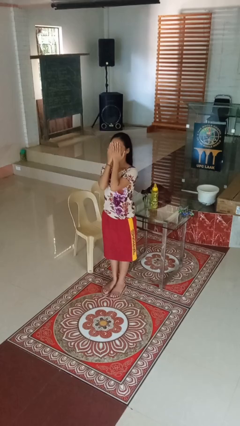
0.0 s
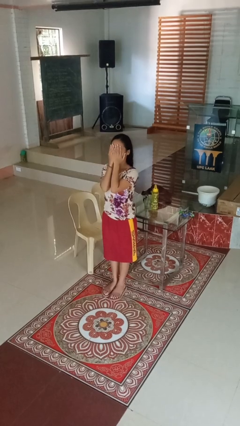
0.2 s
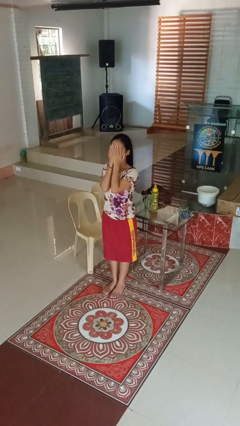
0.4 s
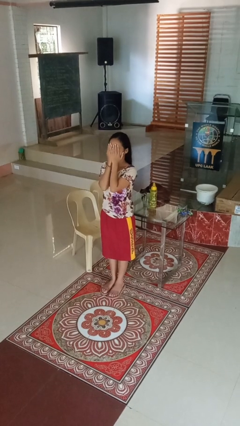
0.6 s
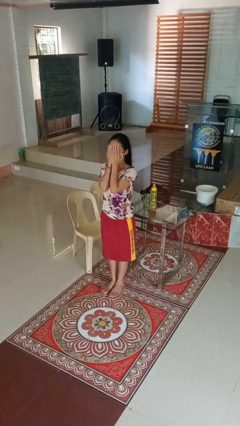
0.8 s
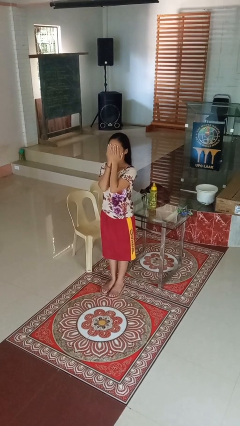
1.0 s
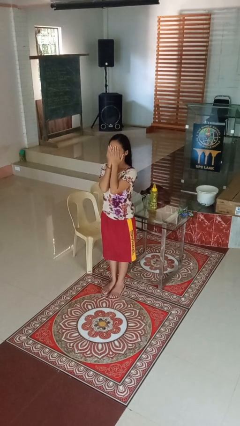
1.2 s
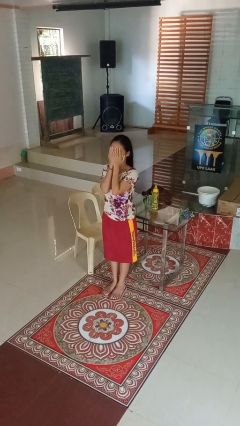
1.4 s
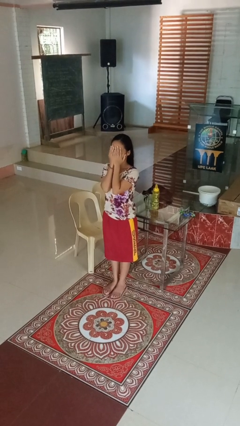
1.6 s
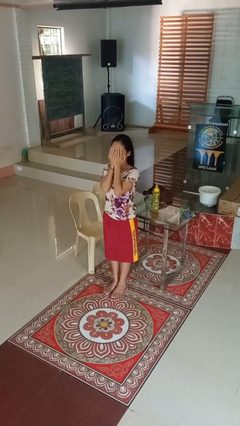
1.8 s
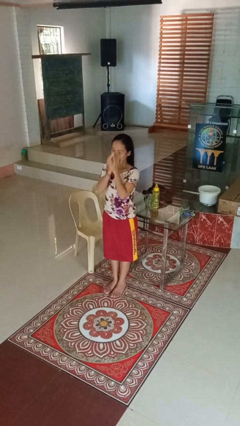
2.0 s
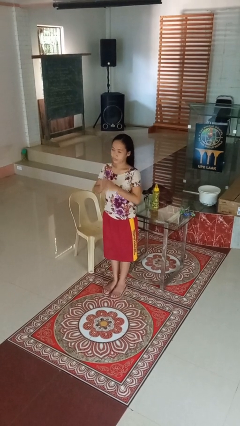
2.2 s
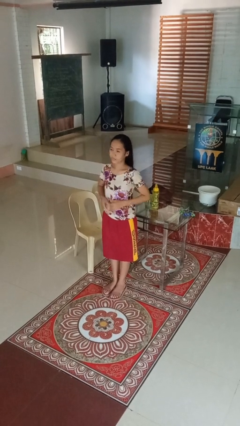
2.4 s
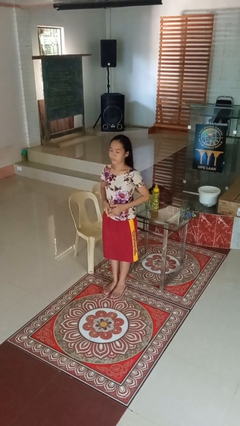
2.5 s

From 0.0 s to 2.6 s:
person covers face with hands

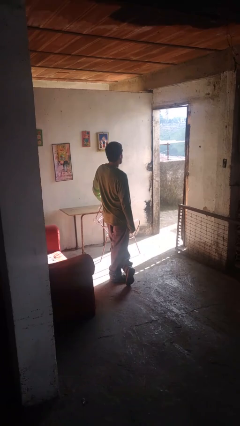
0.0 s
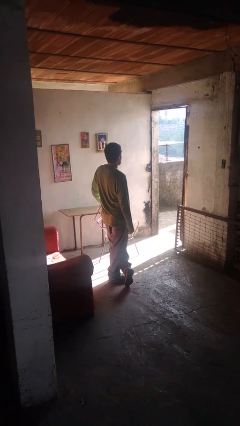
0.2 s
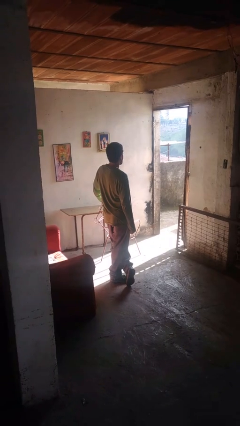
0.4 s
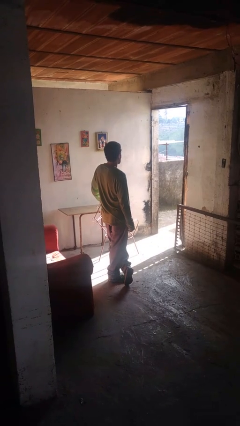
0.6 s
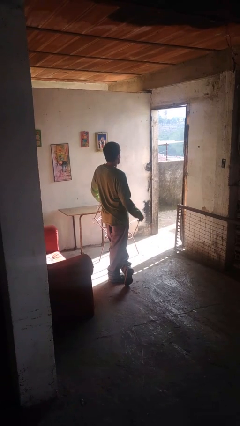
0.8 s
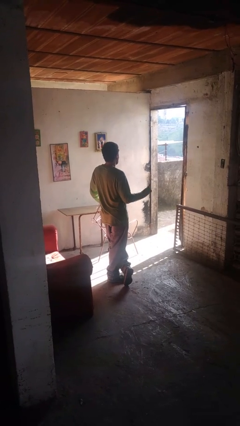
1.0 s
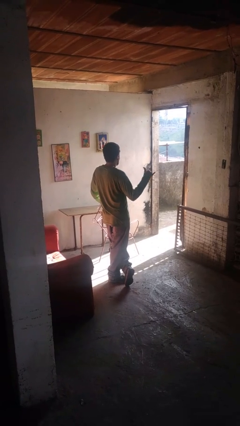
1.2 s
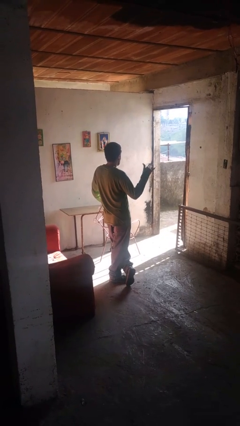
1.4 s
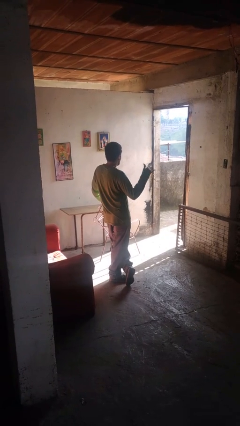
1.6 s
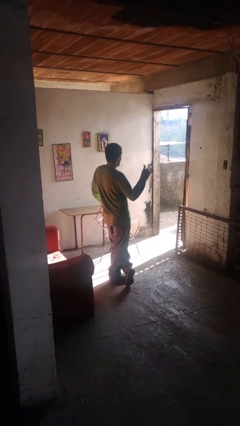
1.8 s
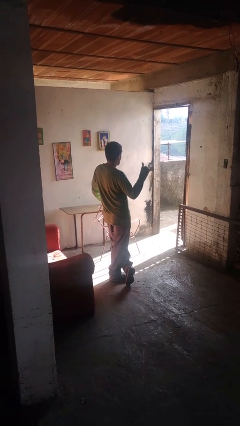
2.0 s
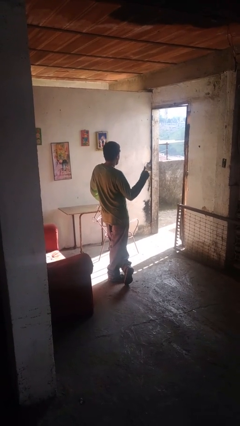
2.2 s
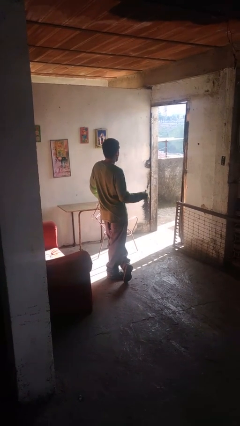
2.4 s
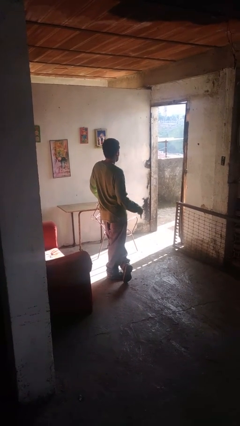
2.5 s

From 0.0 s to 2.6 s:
person gestures hang loose

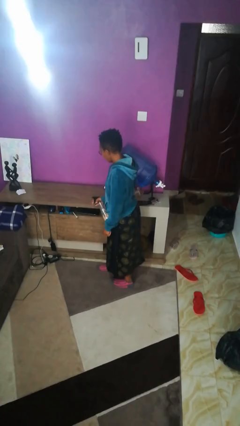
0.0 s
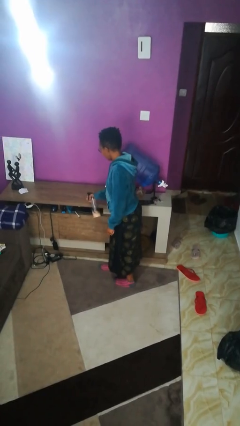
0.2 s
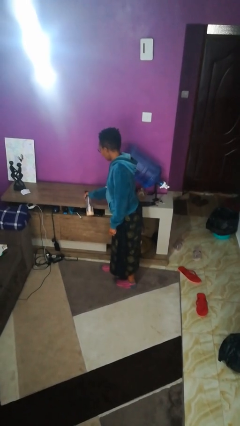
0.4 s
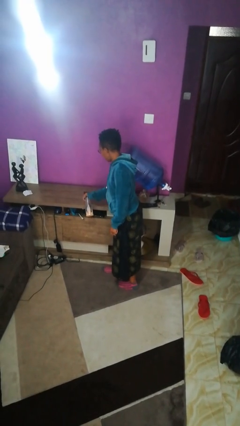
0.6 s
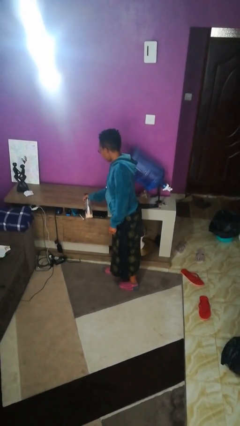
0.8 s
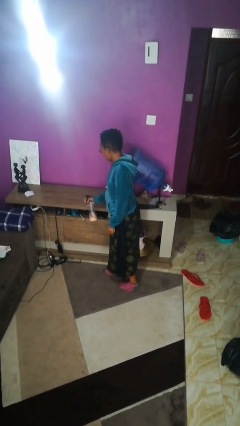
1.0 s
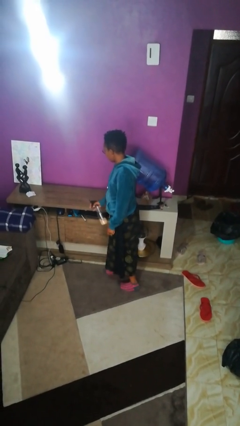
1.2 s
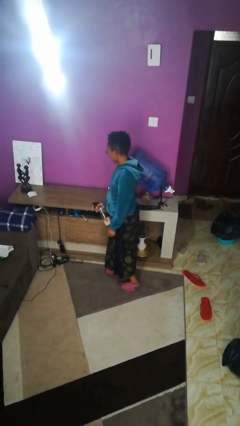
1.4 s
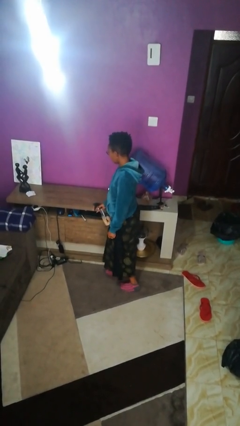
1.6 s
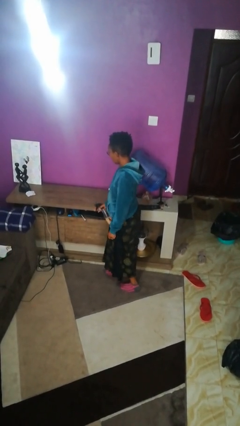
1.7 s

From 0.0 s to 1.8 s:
person sprays from bottle

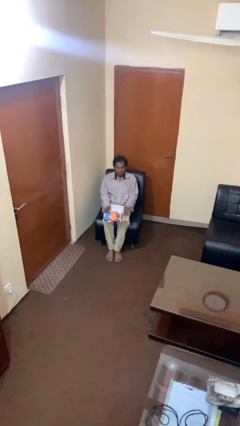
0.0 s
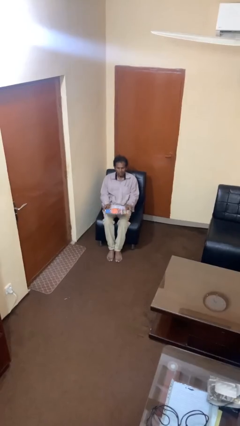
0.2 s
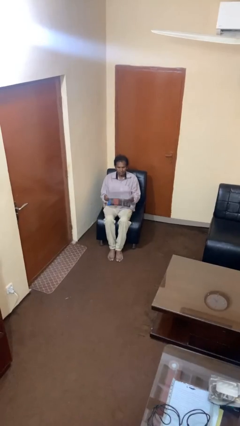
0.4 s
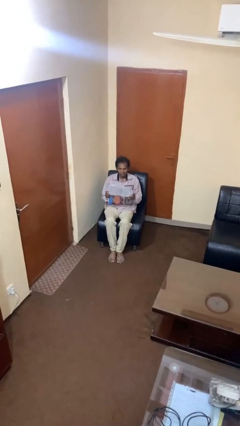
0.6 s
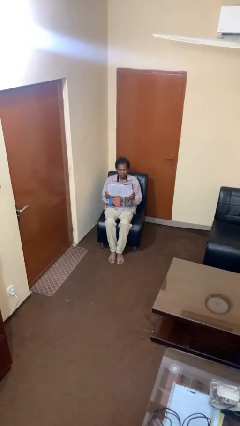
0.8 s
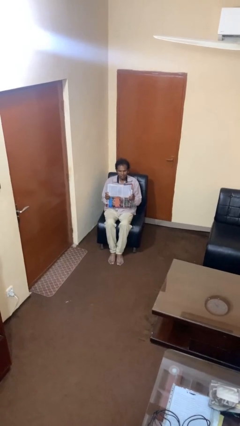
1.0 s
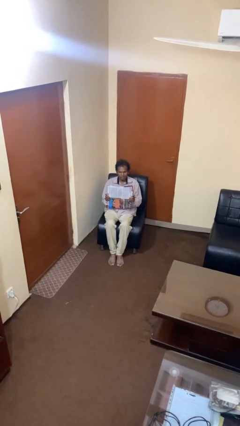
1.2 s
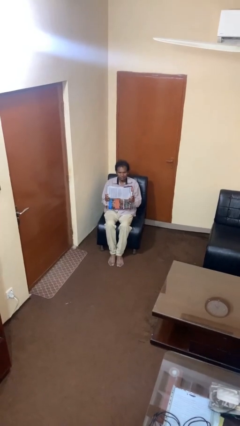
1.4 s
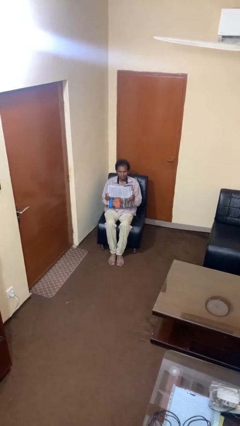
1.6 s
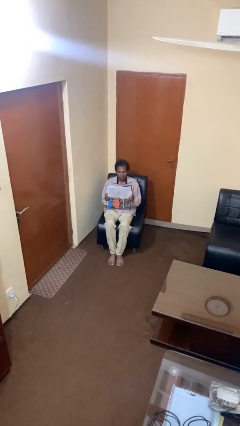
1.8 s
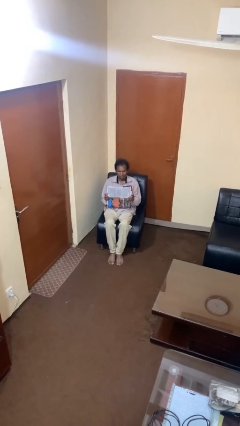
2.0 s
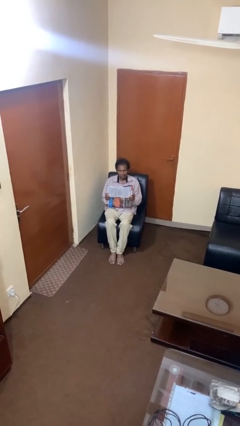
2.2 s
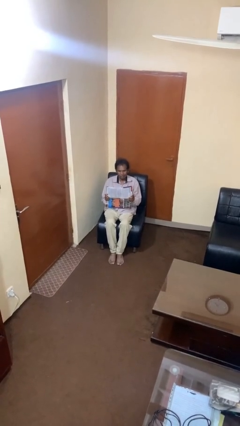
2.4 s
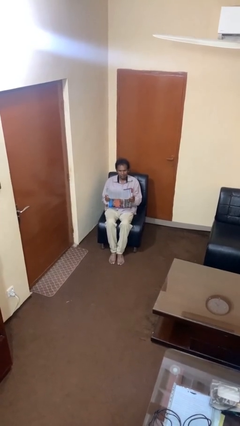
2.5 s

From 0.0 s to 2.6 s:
person reads newspaper

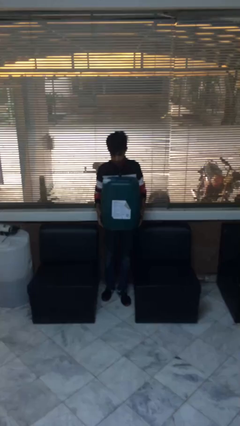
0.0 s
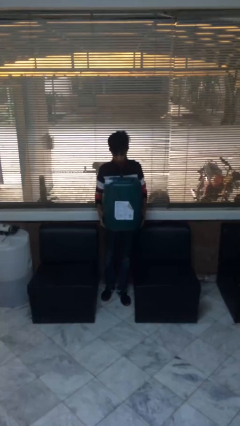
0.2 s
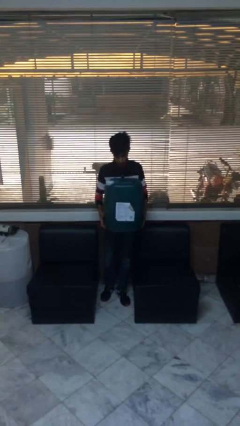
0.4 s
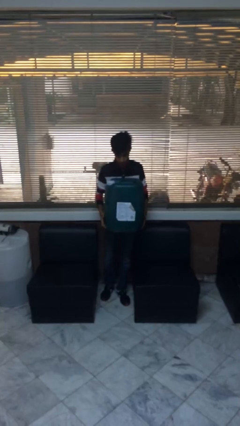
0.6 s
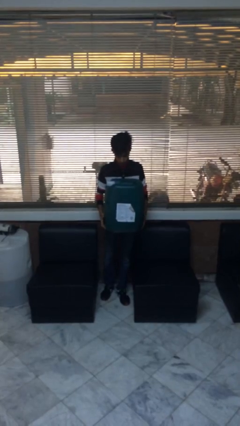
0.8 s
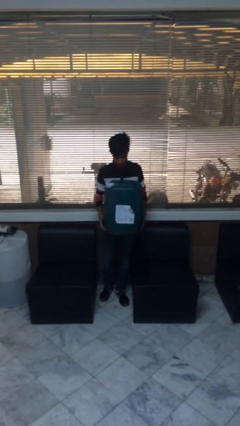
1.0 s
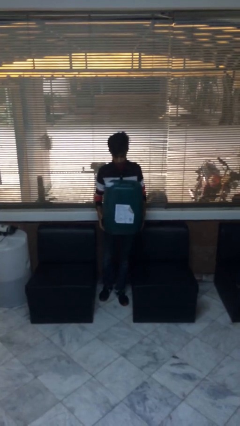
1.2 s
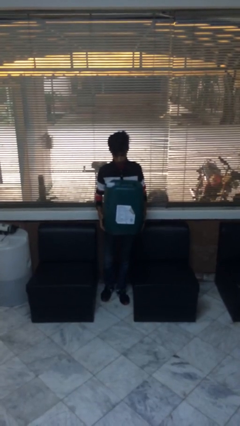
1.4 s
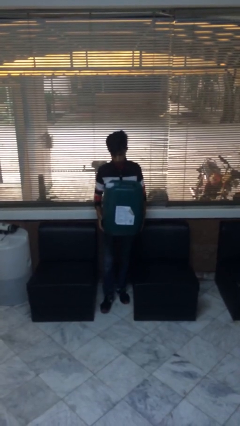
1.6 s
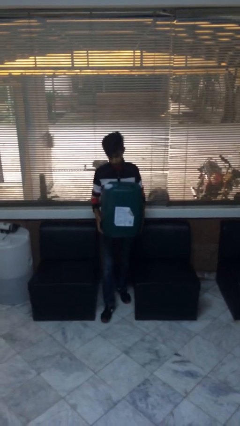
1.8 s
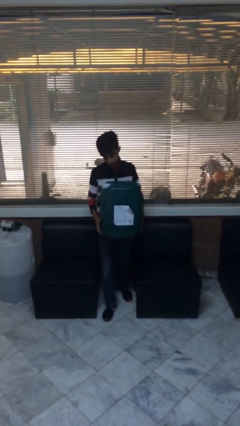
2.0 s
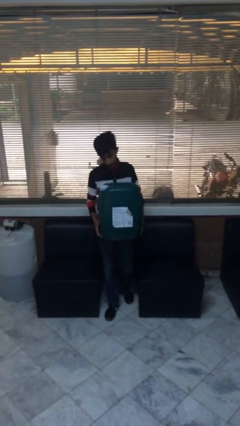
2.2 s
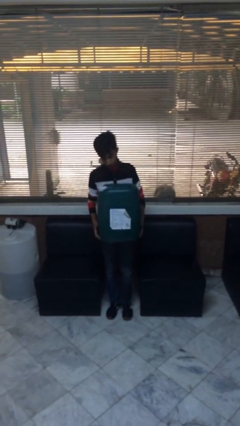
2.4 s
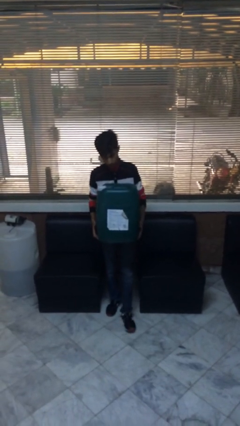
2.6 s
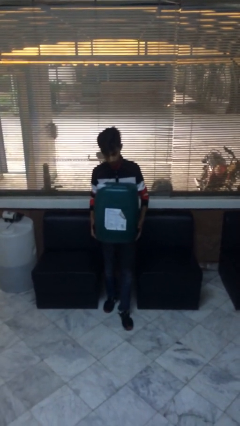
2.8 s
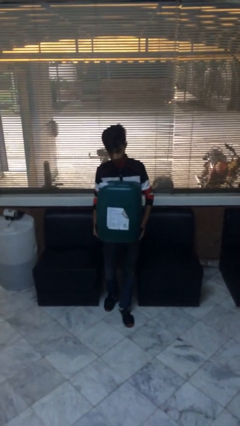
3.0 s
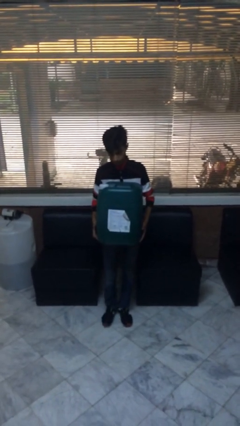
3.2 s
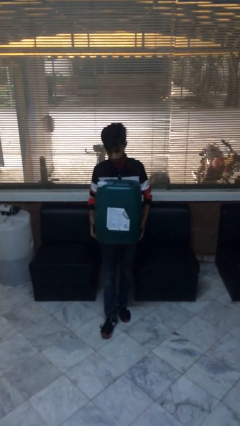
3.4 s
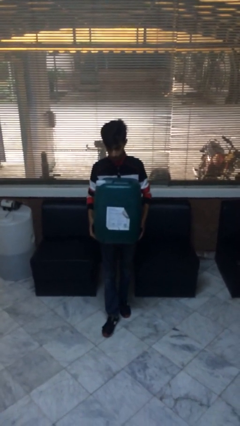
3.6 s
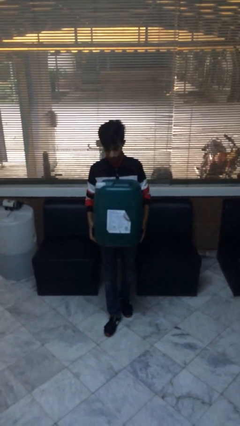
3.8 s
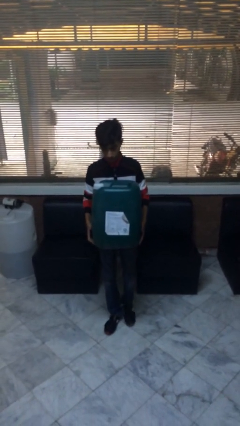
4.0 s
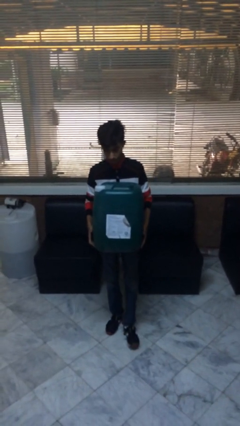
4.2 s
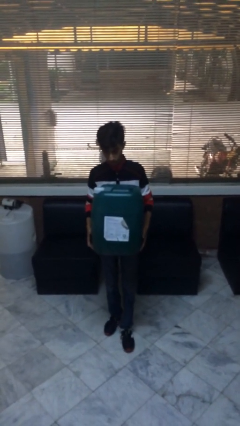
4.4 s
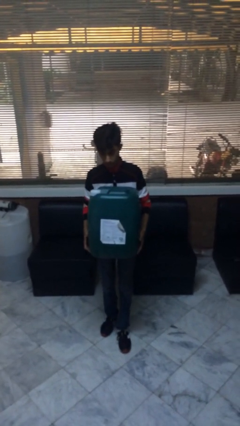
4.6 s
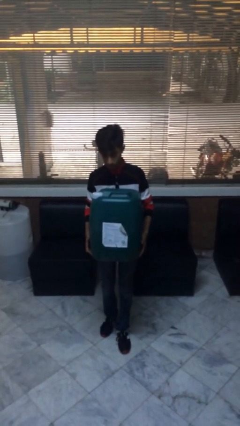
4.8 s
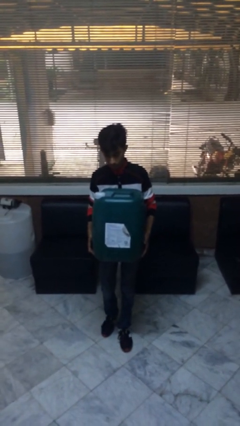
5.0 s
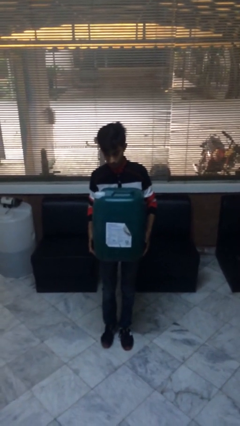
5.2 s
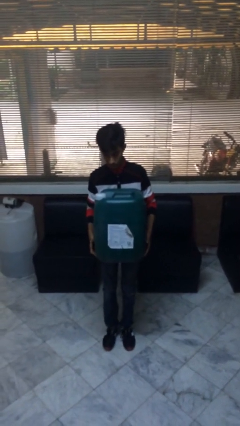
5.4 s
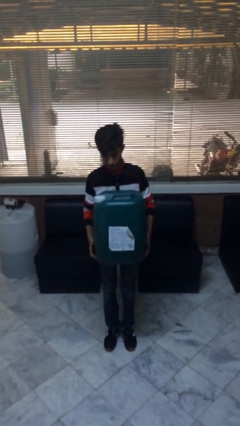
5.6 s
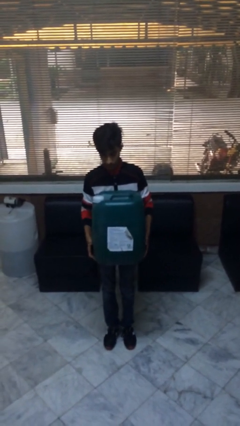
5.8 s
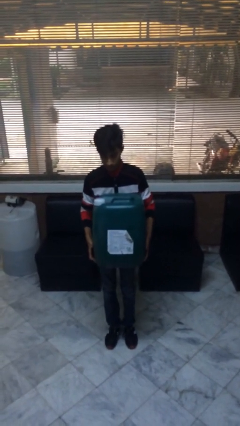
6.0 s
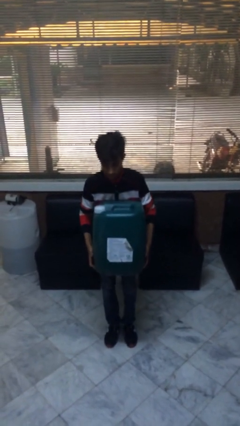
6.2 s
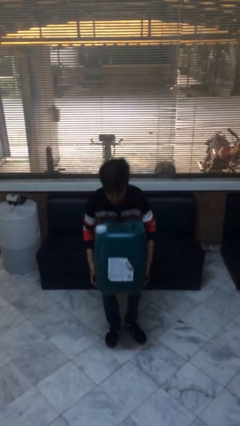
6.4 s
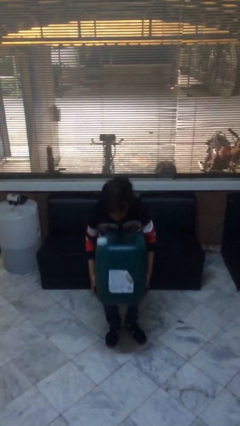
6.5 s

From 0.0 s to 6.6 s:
person carries heavy object

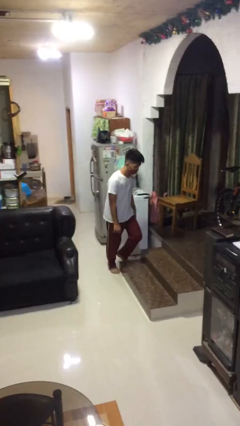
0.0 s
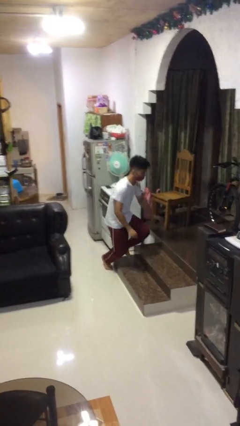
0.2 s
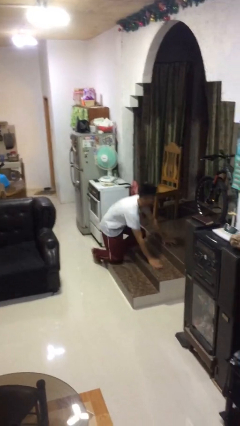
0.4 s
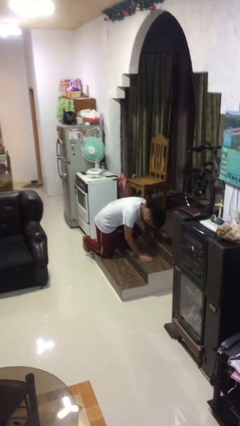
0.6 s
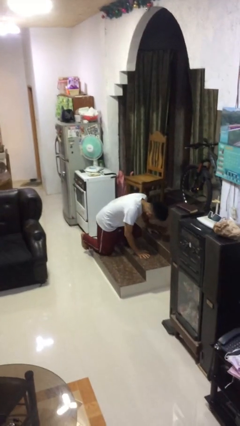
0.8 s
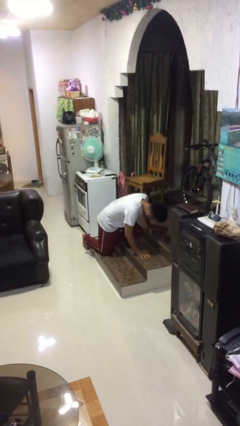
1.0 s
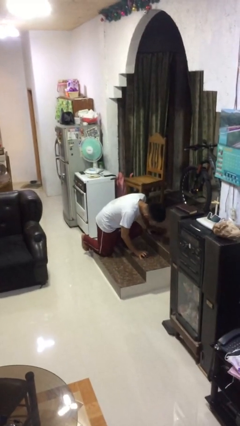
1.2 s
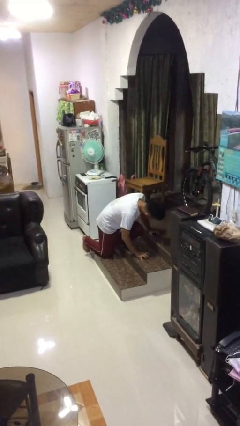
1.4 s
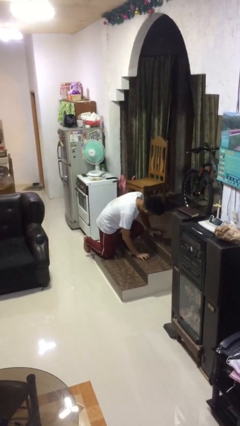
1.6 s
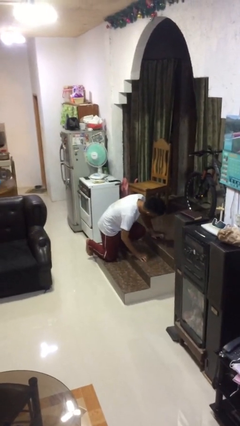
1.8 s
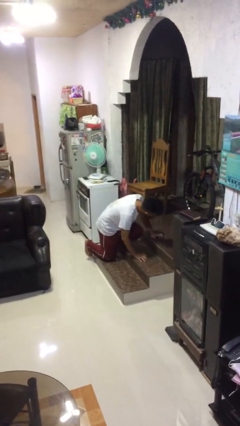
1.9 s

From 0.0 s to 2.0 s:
person trips on object on floor
